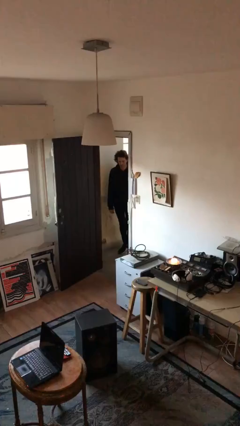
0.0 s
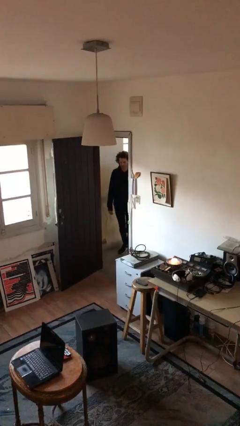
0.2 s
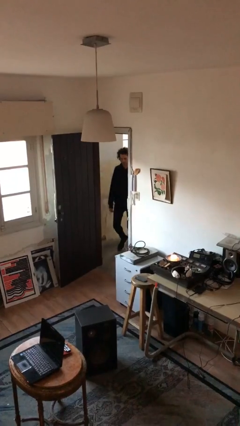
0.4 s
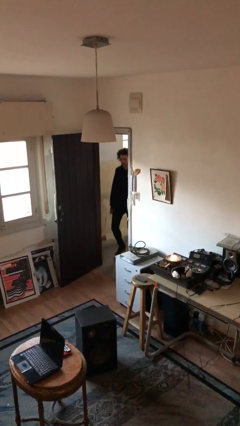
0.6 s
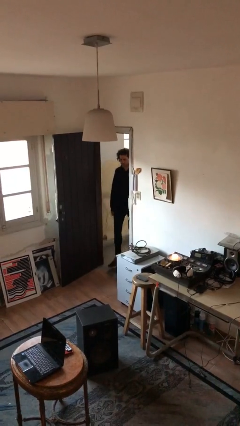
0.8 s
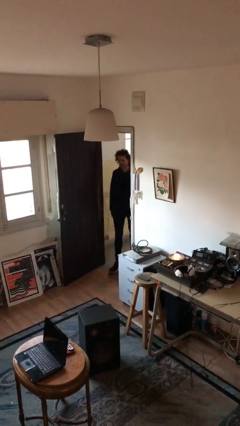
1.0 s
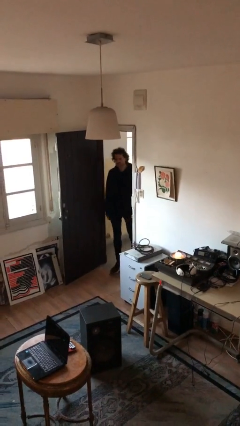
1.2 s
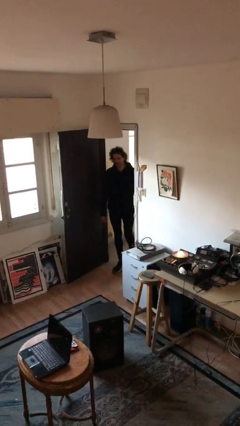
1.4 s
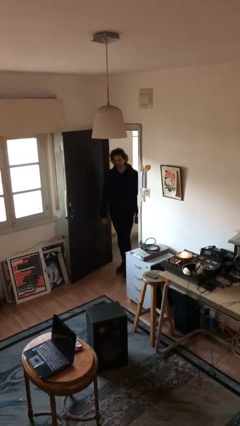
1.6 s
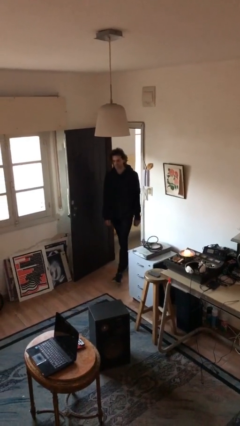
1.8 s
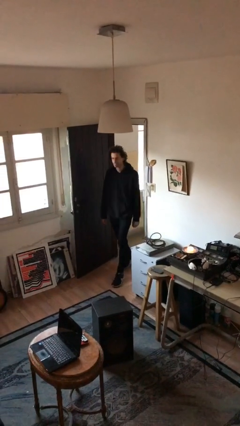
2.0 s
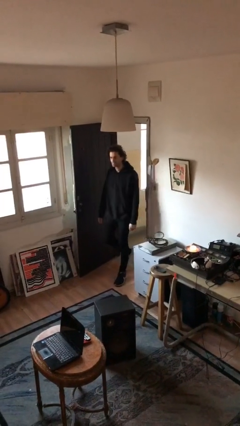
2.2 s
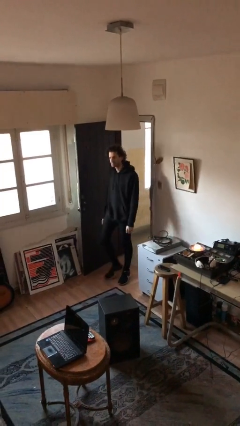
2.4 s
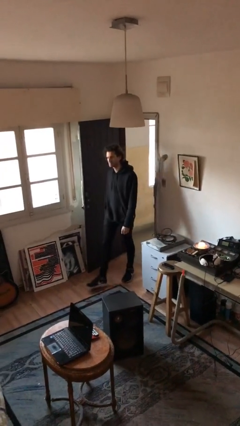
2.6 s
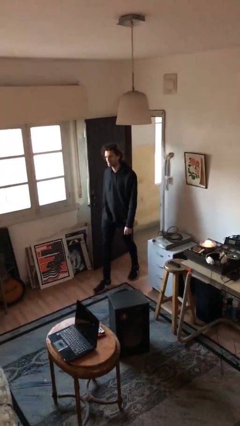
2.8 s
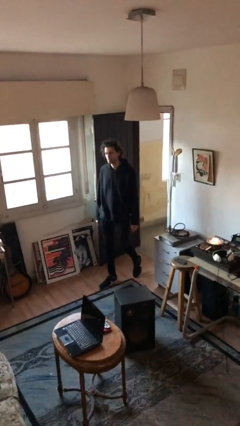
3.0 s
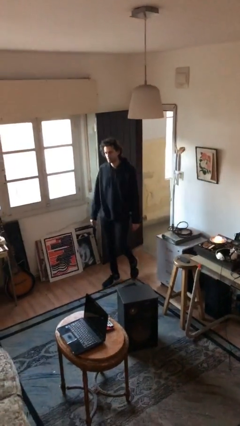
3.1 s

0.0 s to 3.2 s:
person enters scene through structure

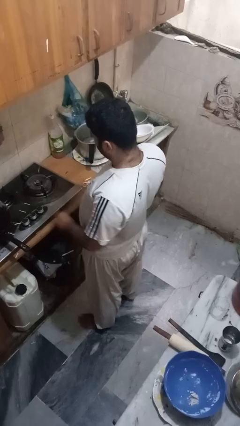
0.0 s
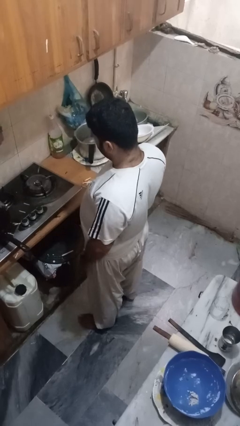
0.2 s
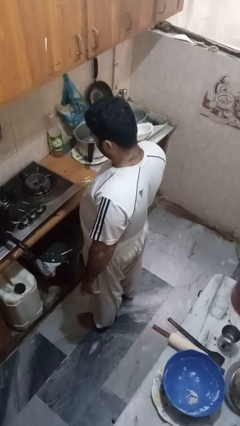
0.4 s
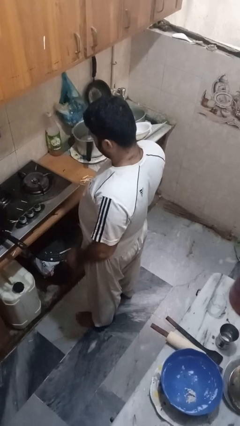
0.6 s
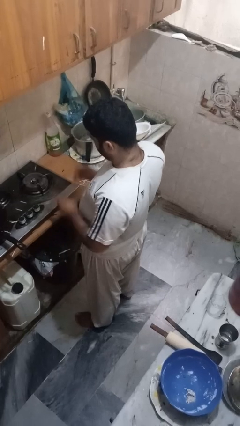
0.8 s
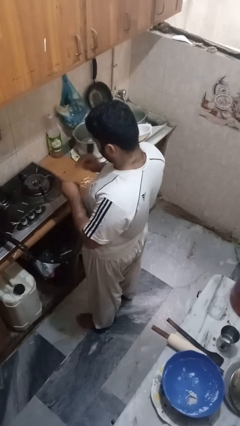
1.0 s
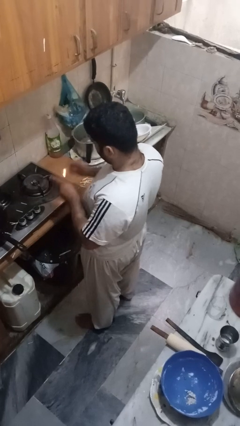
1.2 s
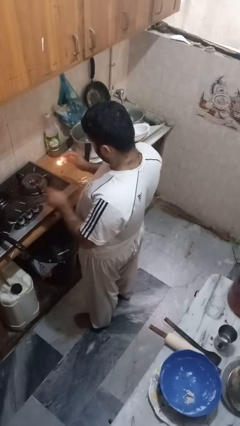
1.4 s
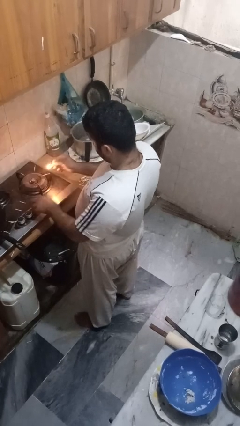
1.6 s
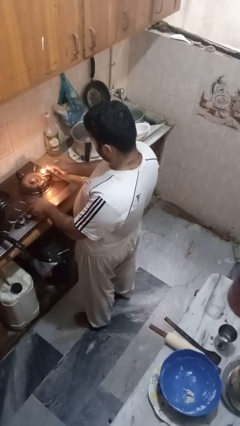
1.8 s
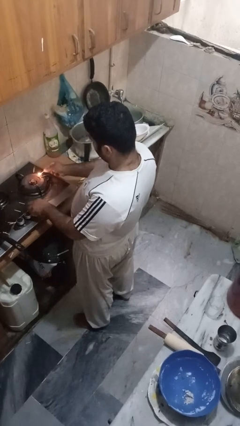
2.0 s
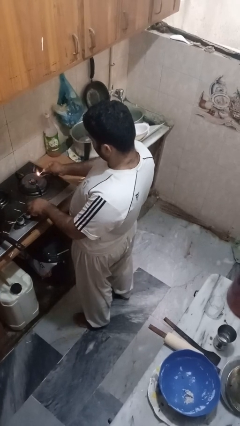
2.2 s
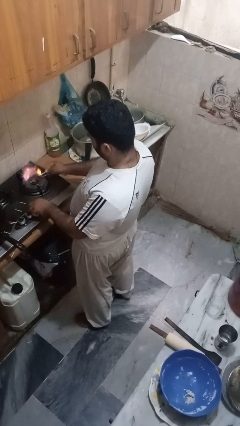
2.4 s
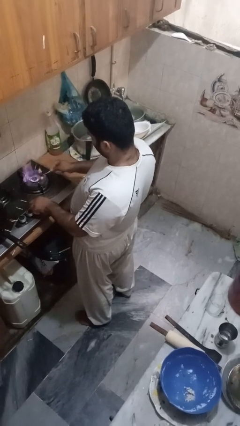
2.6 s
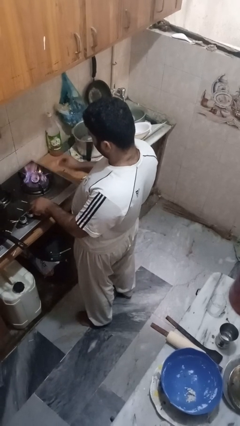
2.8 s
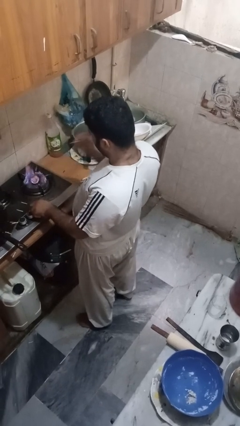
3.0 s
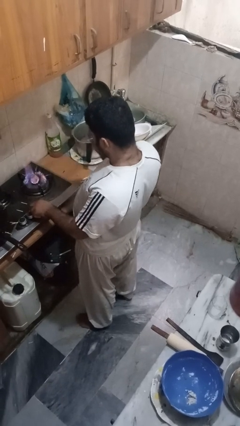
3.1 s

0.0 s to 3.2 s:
person turns on stovetop

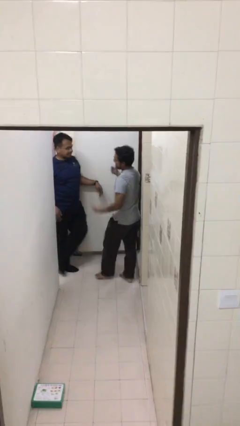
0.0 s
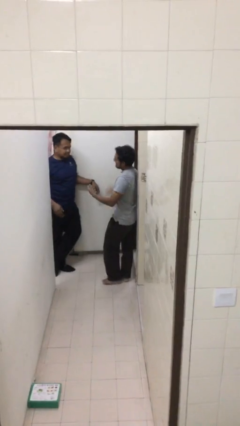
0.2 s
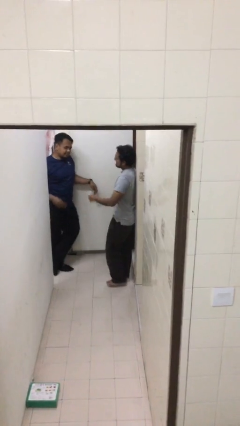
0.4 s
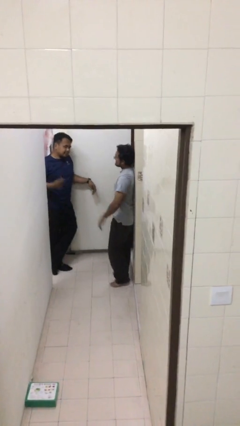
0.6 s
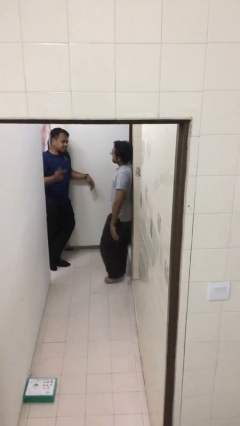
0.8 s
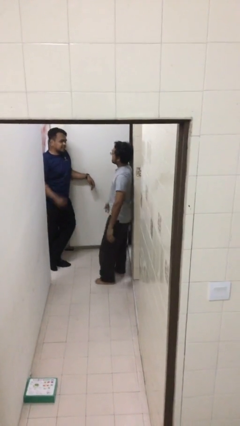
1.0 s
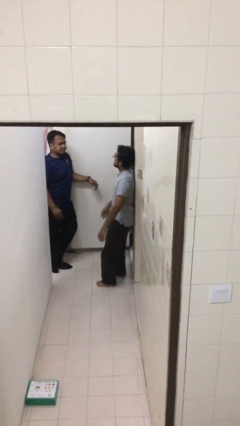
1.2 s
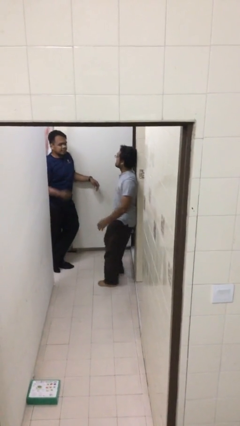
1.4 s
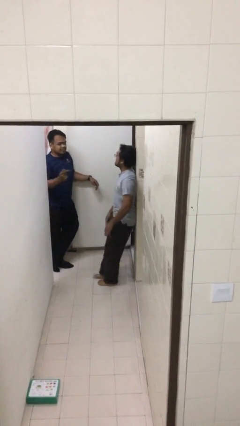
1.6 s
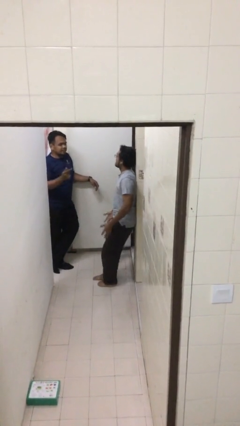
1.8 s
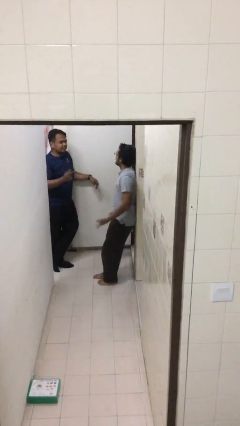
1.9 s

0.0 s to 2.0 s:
person talks to person

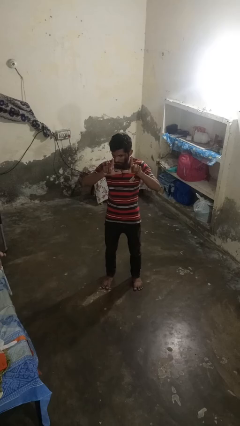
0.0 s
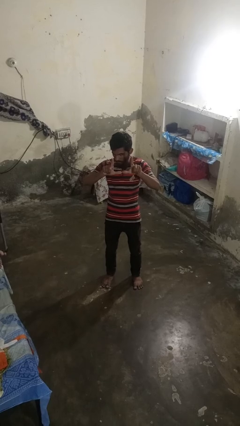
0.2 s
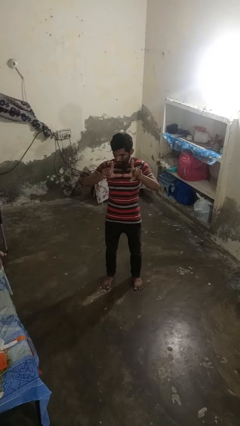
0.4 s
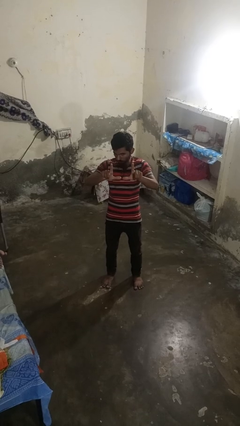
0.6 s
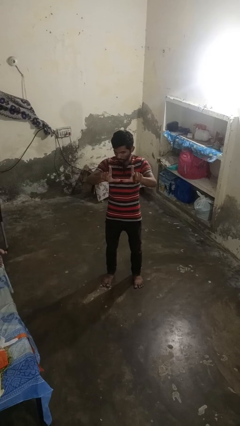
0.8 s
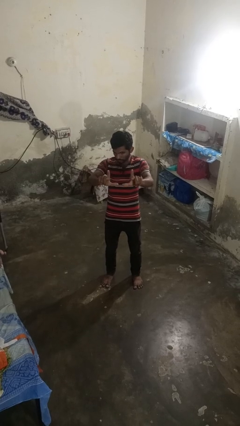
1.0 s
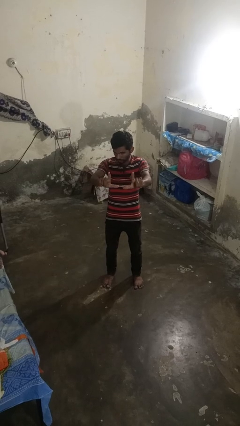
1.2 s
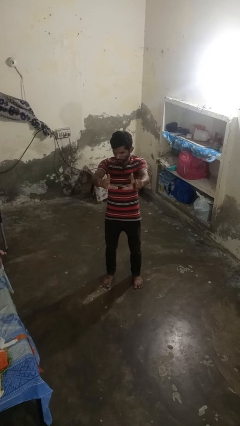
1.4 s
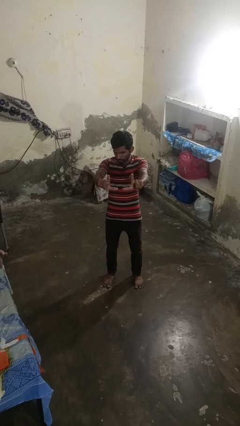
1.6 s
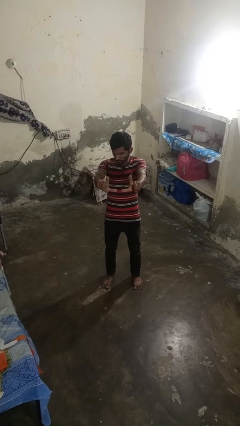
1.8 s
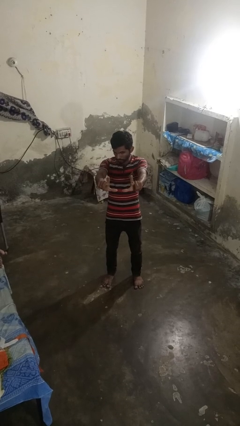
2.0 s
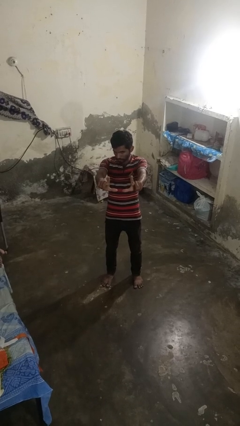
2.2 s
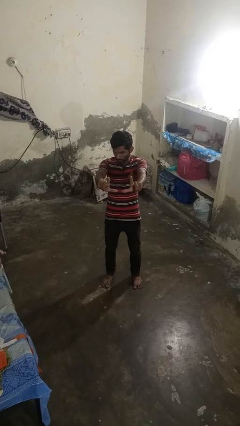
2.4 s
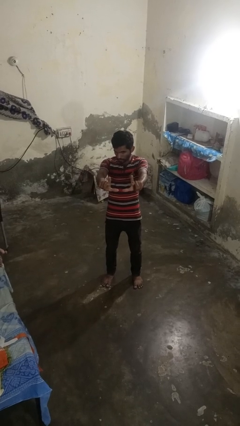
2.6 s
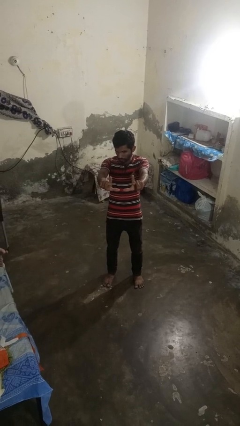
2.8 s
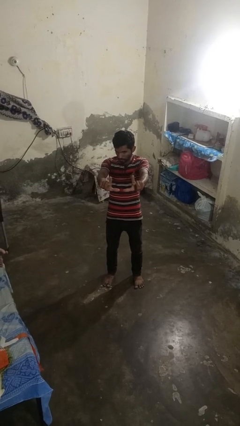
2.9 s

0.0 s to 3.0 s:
person gestures zoom out

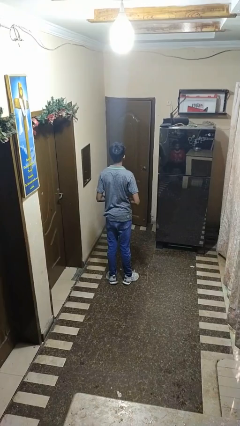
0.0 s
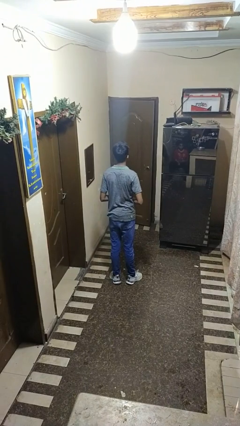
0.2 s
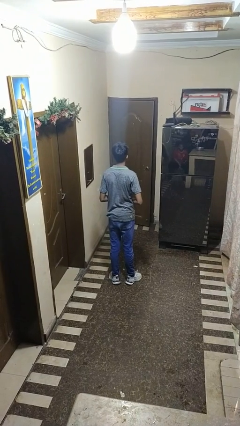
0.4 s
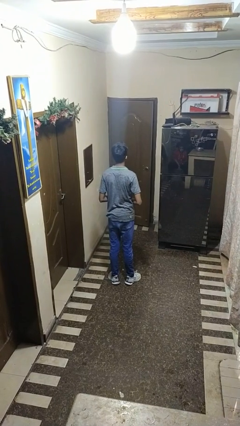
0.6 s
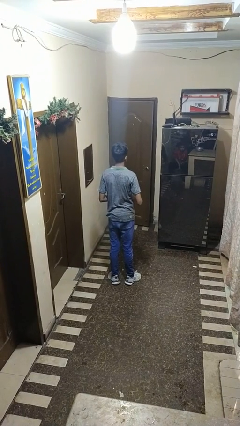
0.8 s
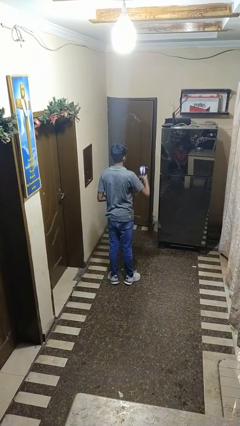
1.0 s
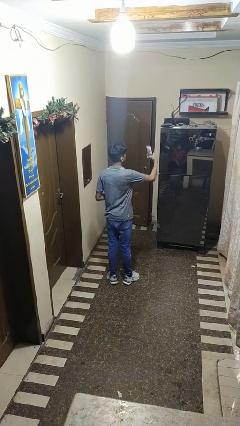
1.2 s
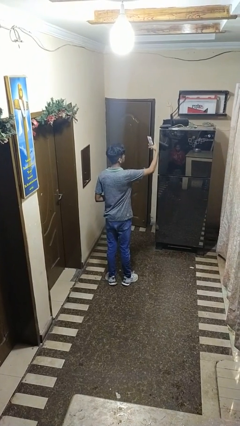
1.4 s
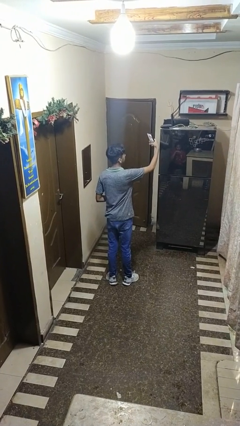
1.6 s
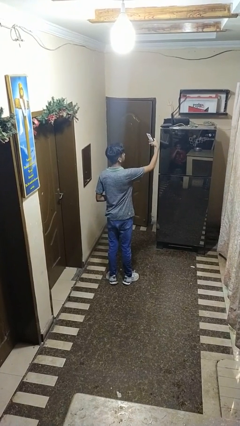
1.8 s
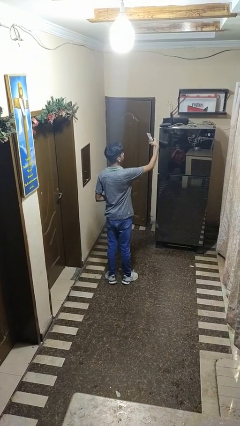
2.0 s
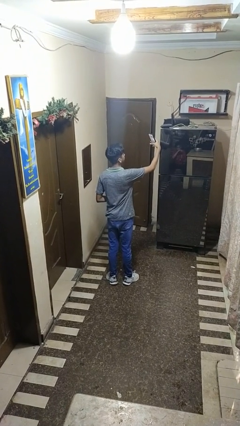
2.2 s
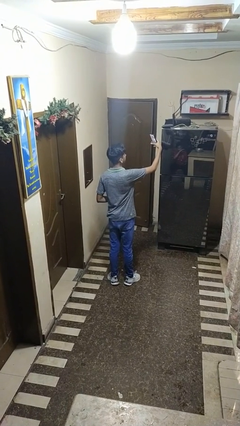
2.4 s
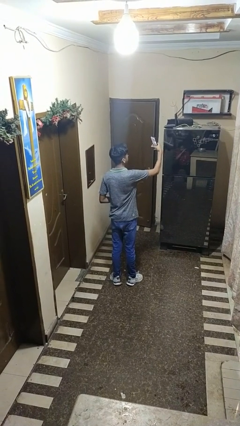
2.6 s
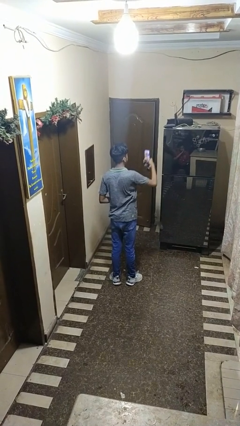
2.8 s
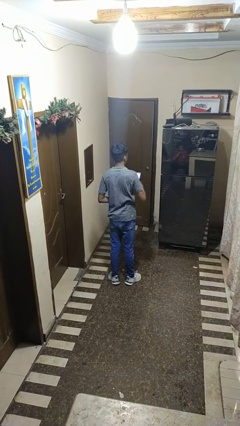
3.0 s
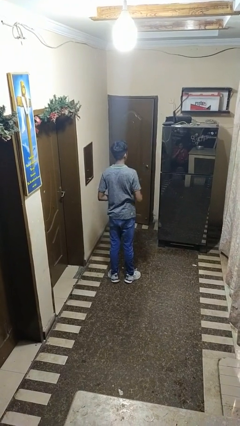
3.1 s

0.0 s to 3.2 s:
person takes selfie

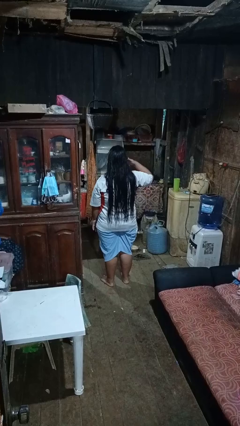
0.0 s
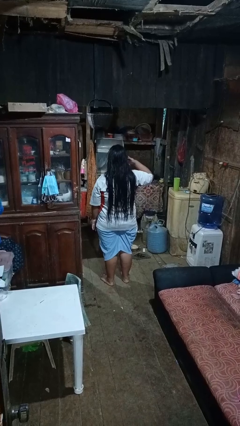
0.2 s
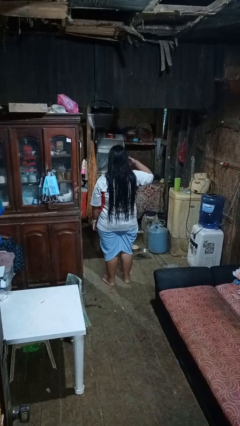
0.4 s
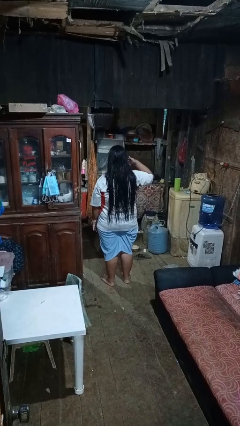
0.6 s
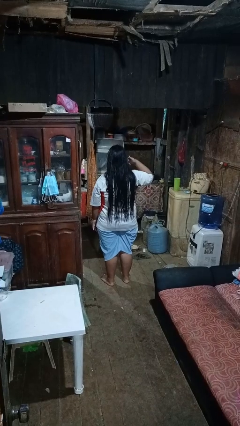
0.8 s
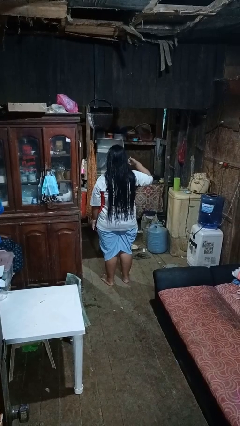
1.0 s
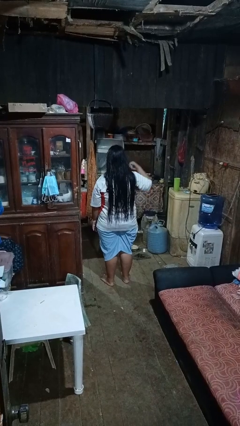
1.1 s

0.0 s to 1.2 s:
person gestures call me

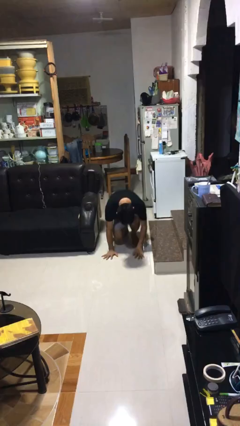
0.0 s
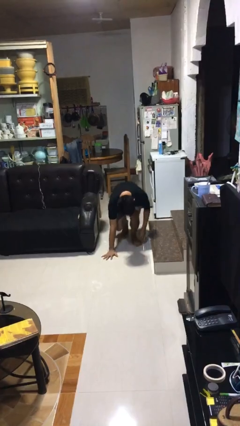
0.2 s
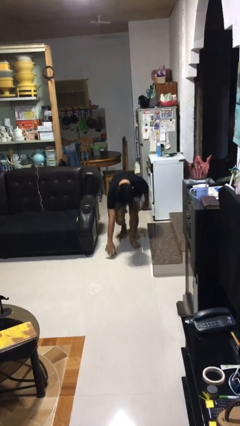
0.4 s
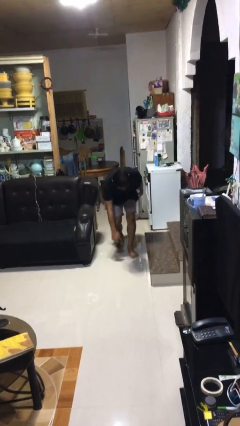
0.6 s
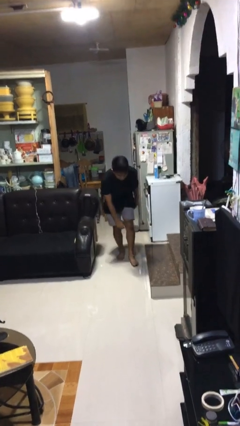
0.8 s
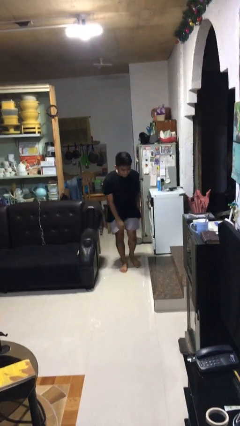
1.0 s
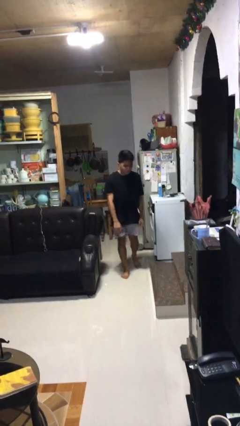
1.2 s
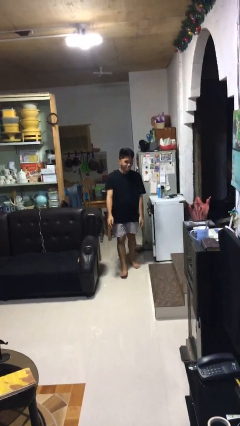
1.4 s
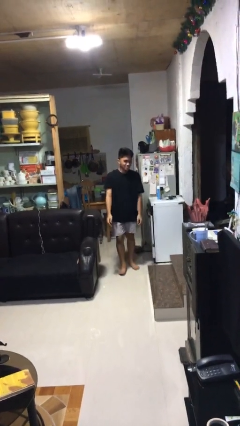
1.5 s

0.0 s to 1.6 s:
person stands up from floor

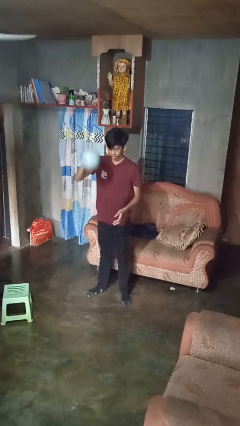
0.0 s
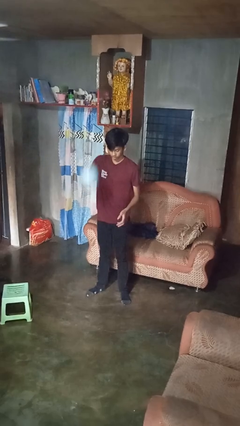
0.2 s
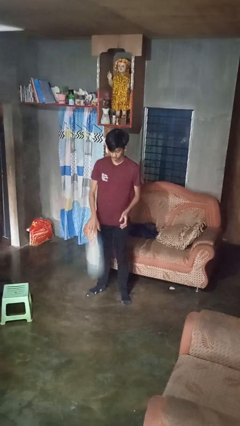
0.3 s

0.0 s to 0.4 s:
person bounces ball on floor
